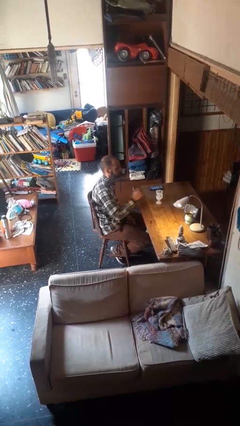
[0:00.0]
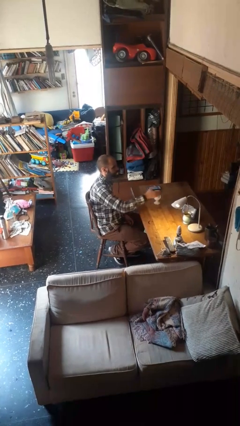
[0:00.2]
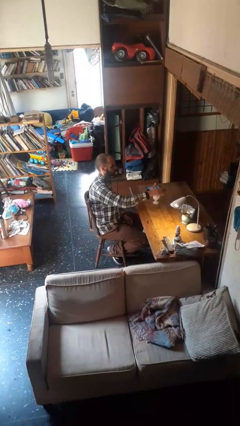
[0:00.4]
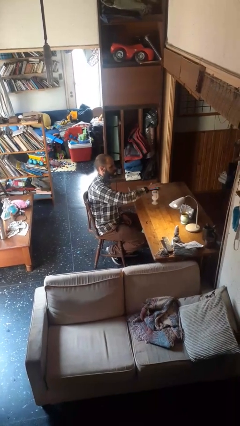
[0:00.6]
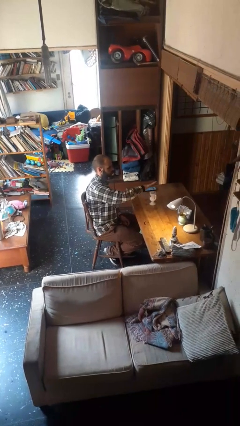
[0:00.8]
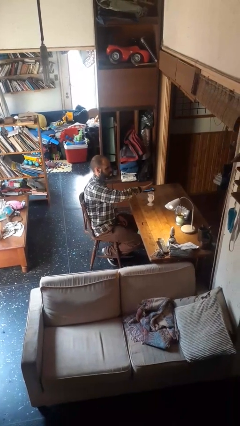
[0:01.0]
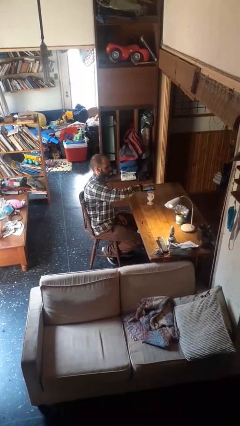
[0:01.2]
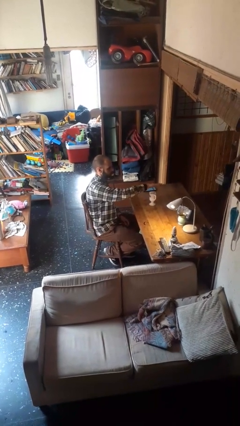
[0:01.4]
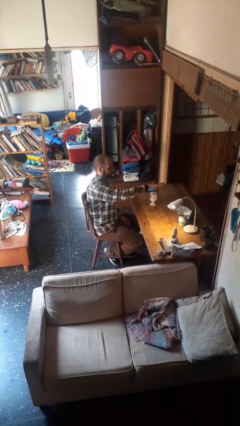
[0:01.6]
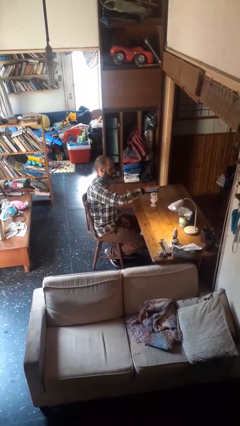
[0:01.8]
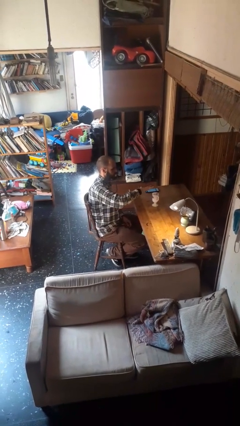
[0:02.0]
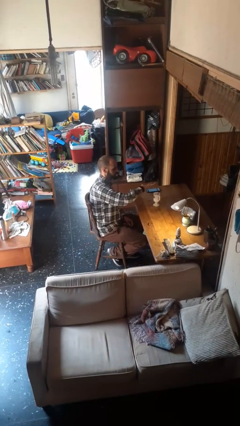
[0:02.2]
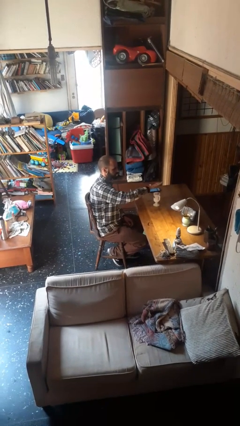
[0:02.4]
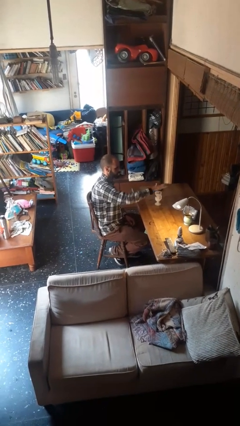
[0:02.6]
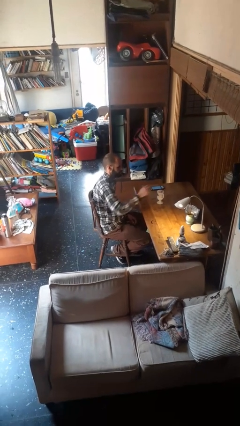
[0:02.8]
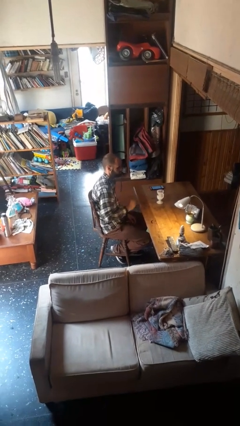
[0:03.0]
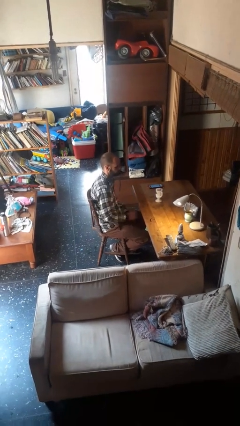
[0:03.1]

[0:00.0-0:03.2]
person waves hand over object

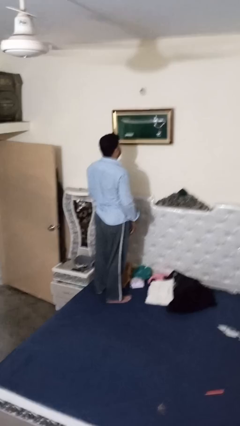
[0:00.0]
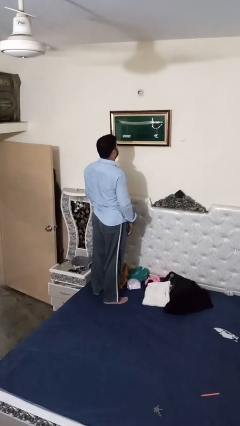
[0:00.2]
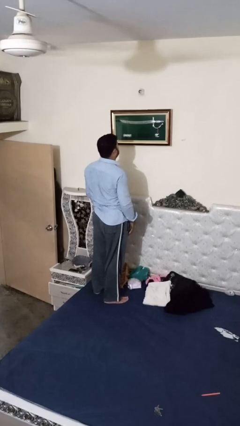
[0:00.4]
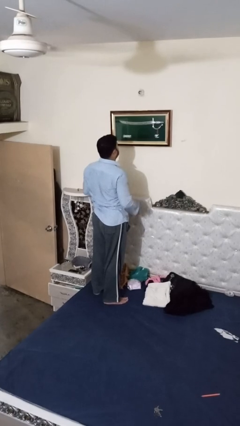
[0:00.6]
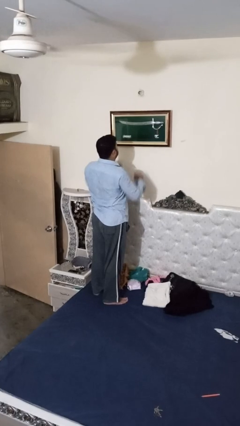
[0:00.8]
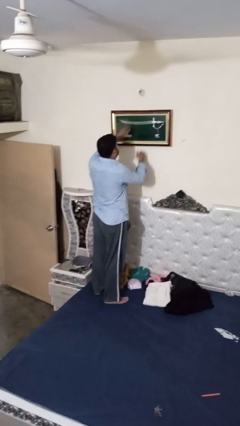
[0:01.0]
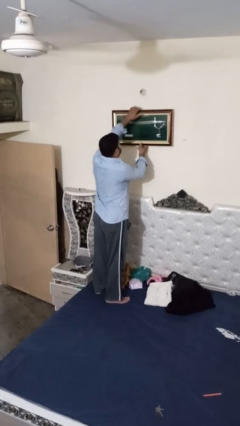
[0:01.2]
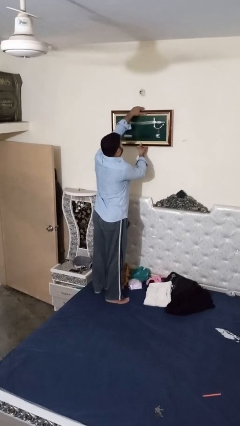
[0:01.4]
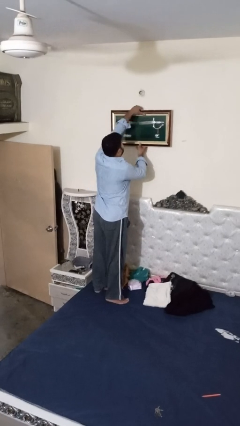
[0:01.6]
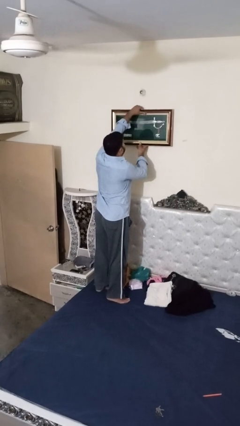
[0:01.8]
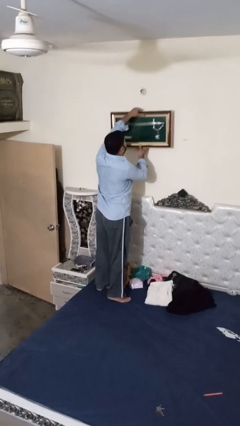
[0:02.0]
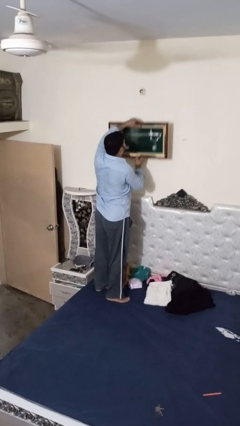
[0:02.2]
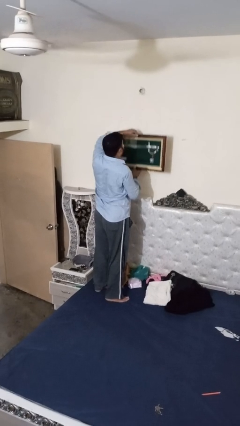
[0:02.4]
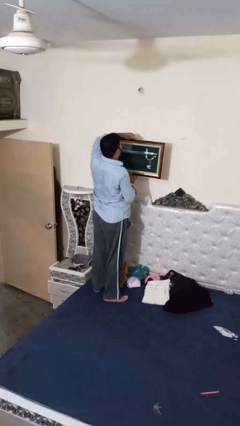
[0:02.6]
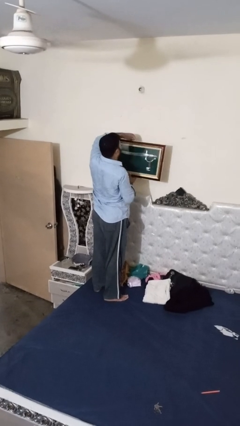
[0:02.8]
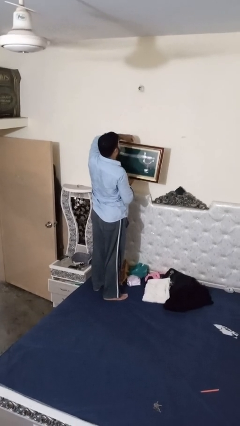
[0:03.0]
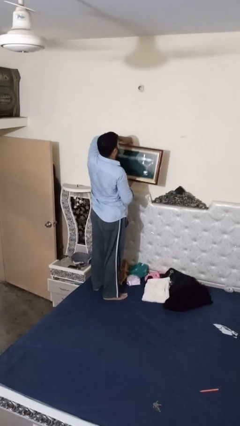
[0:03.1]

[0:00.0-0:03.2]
person takes down picture frame

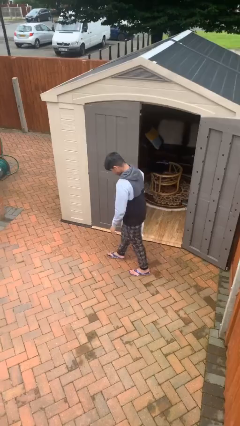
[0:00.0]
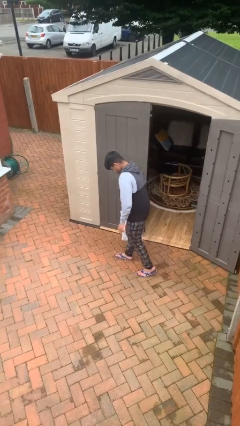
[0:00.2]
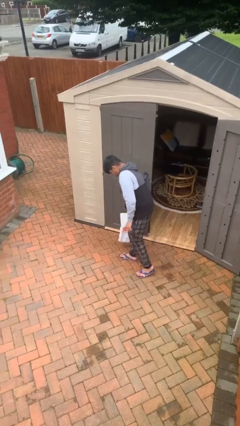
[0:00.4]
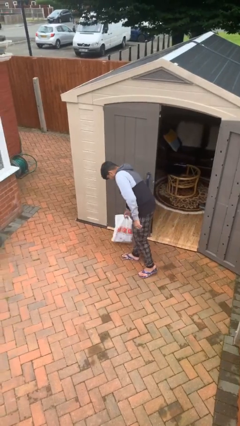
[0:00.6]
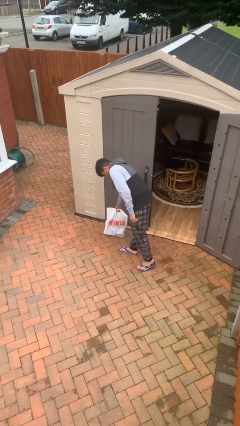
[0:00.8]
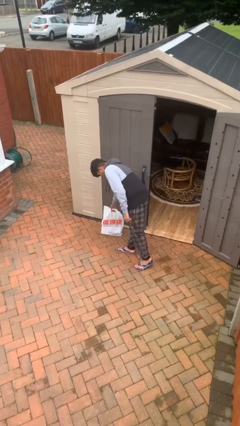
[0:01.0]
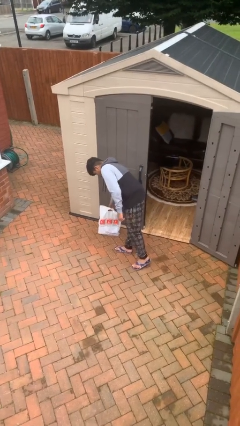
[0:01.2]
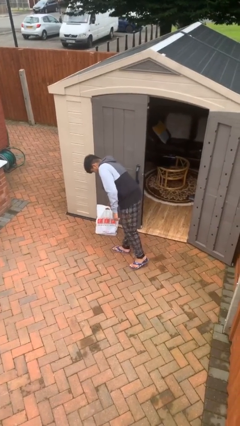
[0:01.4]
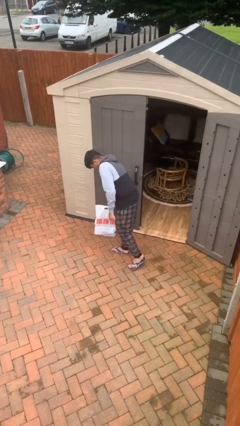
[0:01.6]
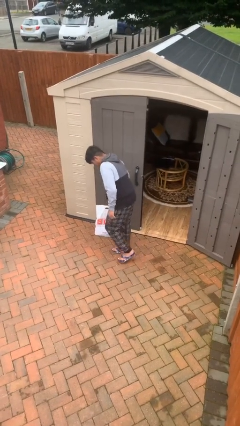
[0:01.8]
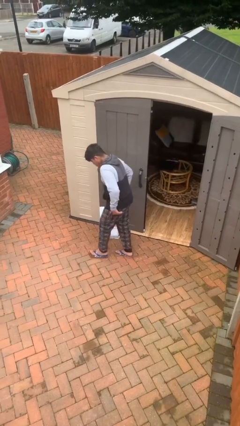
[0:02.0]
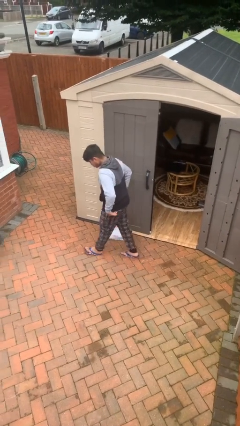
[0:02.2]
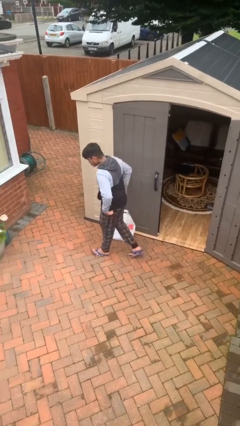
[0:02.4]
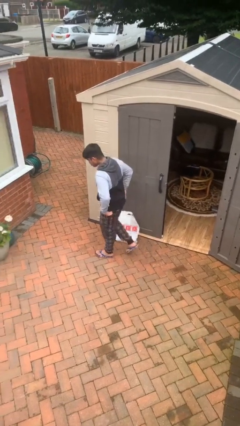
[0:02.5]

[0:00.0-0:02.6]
person puts down object on floor

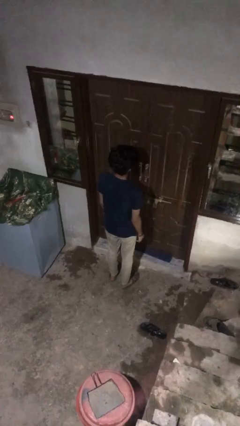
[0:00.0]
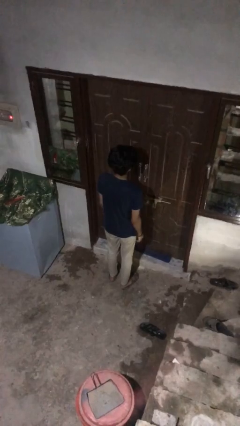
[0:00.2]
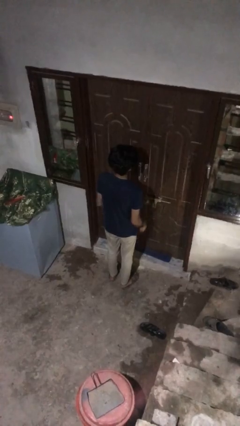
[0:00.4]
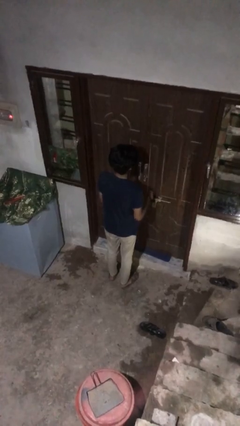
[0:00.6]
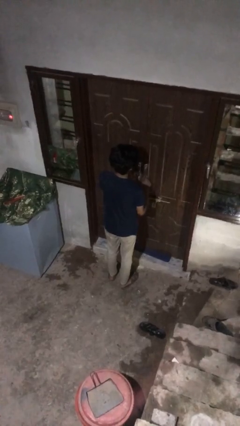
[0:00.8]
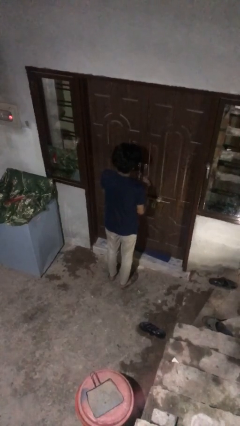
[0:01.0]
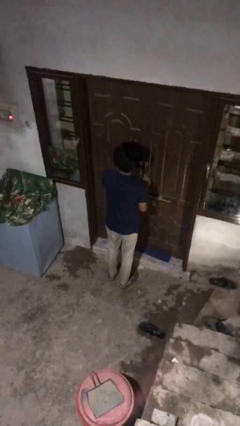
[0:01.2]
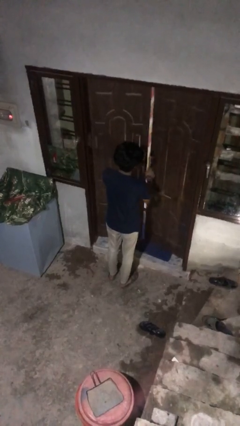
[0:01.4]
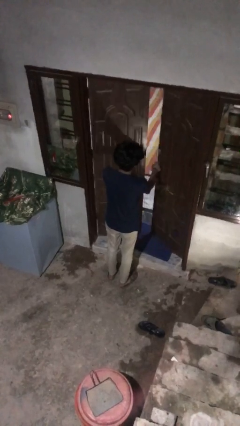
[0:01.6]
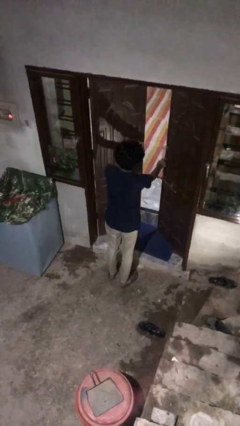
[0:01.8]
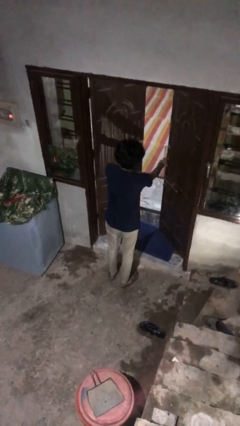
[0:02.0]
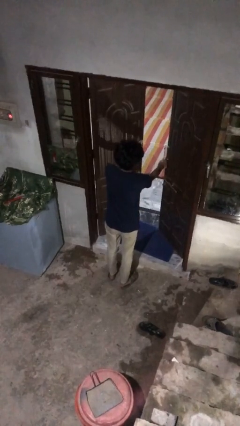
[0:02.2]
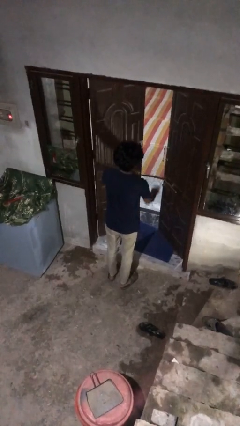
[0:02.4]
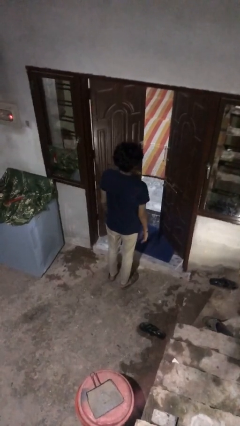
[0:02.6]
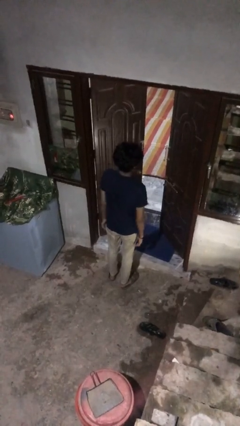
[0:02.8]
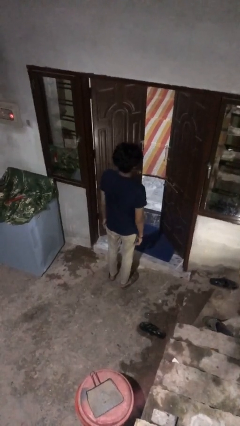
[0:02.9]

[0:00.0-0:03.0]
person opens facility door

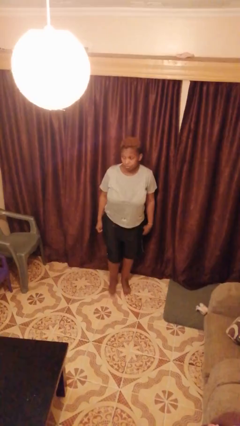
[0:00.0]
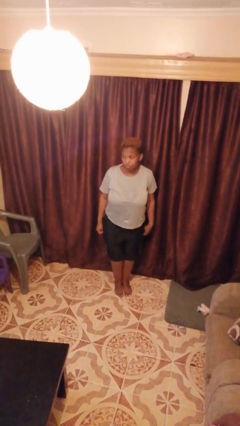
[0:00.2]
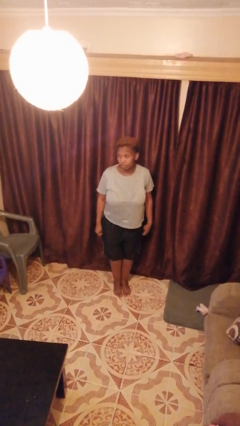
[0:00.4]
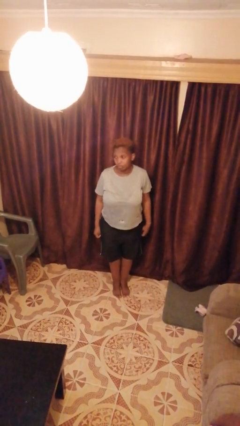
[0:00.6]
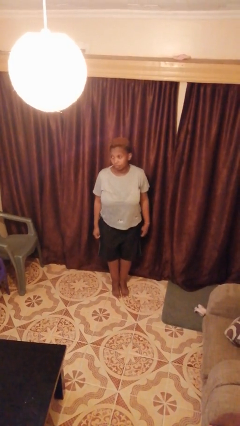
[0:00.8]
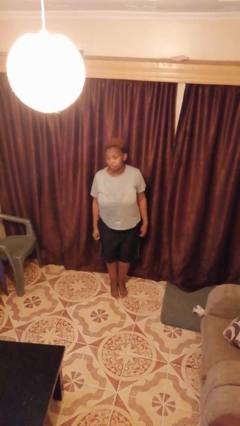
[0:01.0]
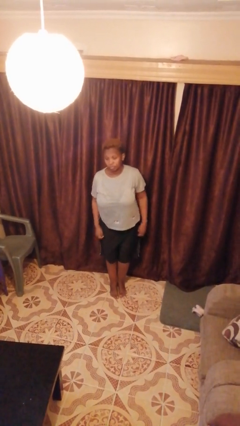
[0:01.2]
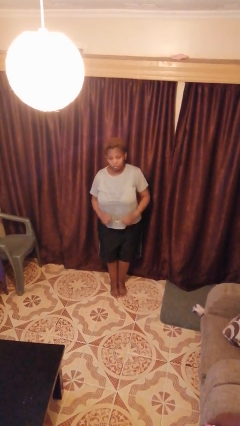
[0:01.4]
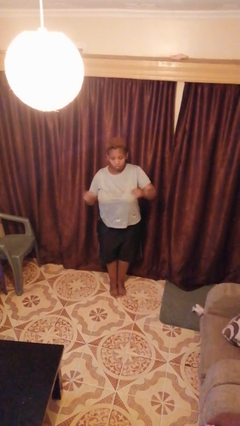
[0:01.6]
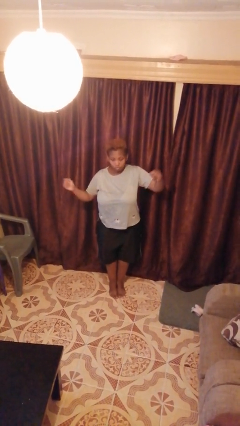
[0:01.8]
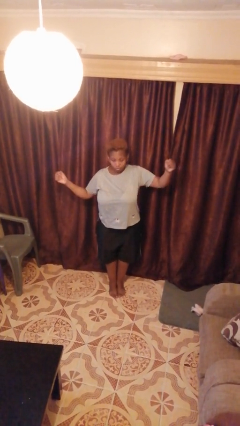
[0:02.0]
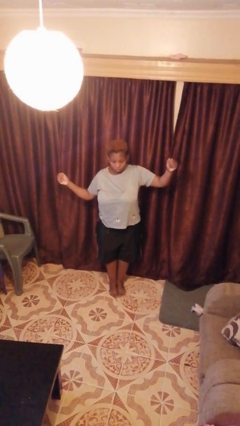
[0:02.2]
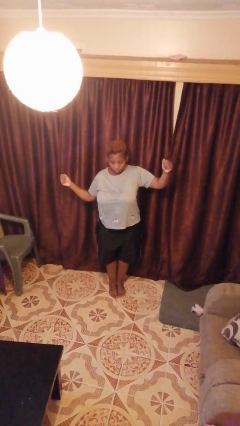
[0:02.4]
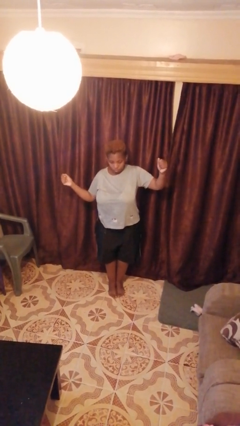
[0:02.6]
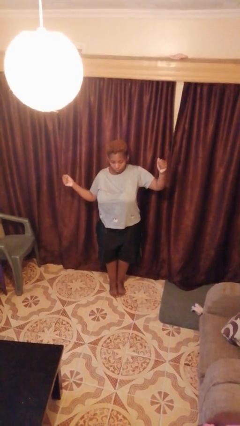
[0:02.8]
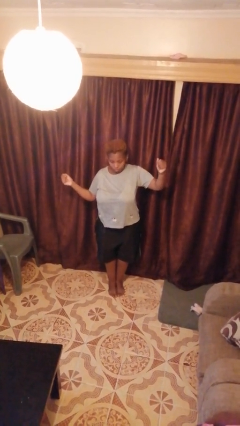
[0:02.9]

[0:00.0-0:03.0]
person gestures zoom in

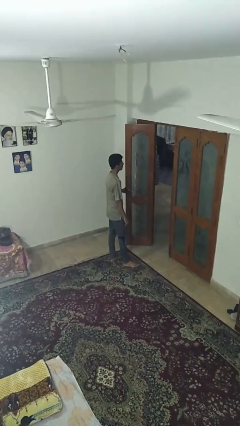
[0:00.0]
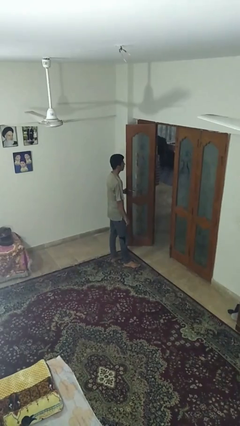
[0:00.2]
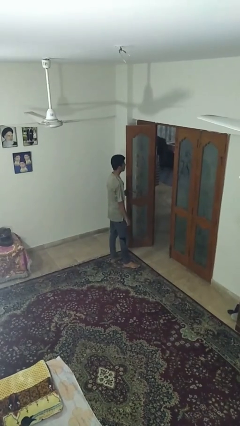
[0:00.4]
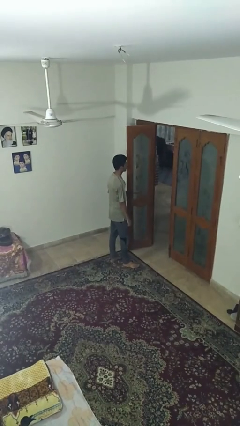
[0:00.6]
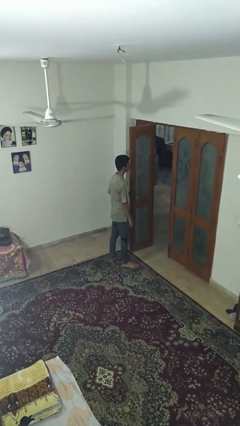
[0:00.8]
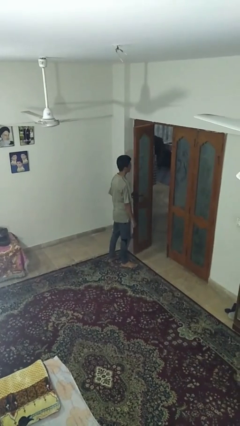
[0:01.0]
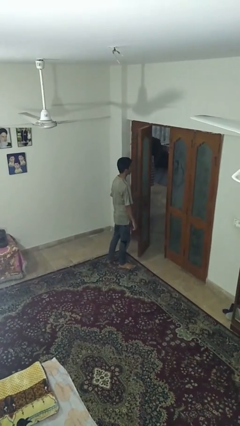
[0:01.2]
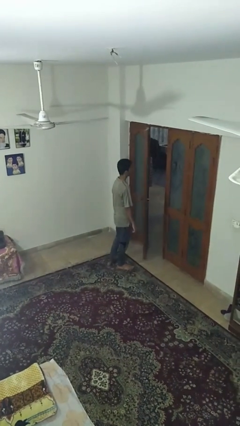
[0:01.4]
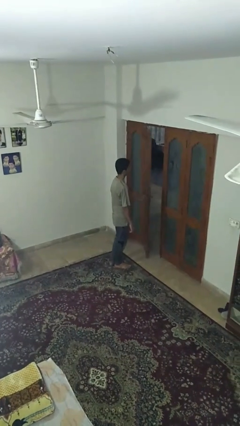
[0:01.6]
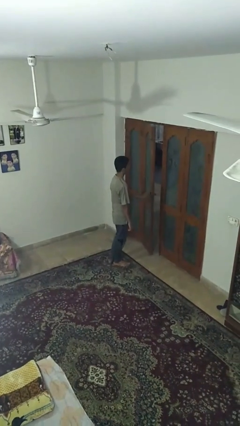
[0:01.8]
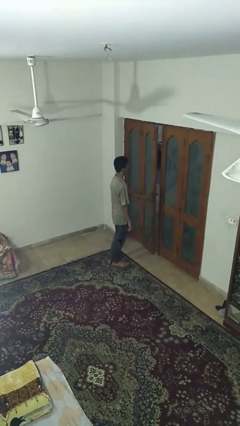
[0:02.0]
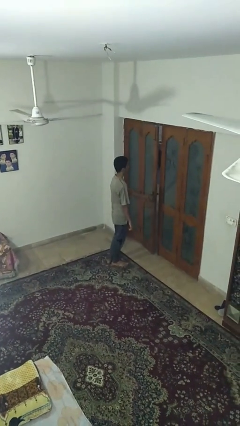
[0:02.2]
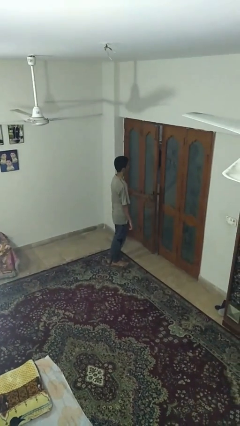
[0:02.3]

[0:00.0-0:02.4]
person closes facility door
